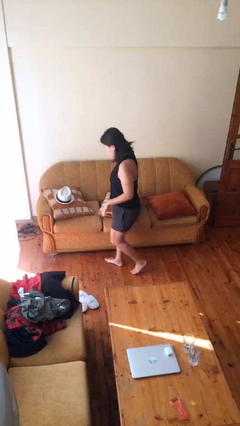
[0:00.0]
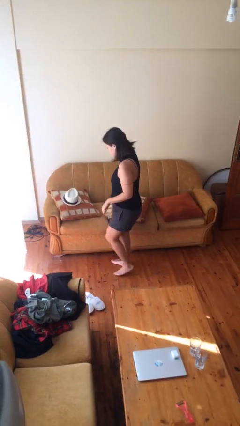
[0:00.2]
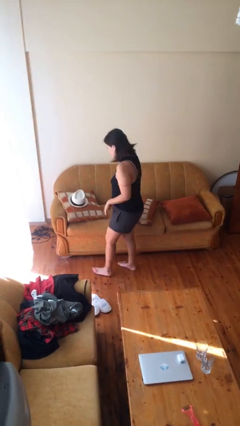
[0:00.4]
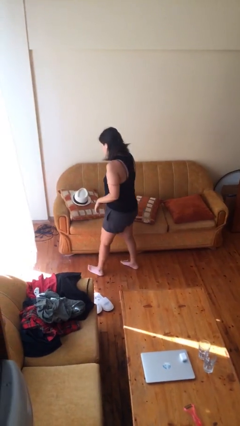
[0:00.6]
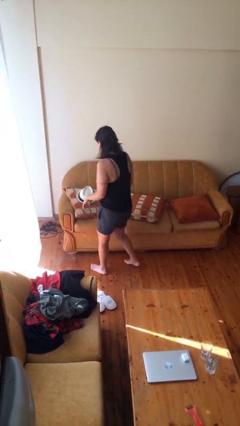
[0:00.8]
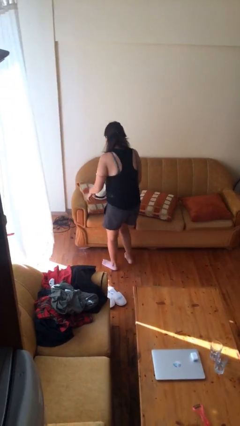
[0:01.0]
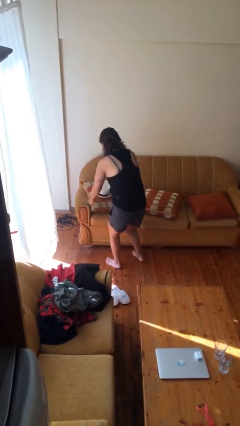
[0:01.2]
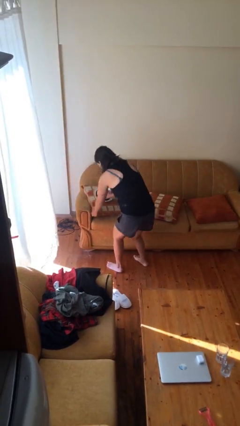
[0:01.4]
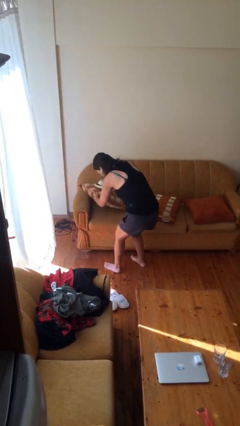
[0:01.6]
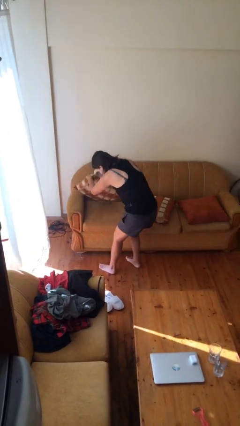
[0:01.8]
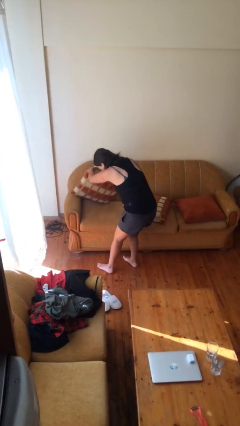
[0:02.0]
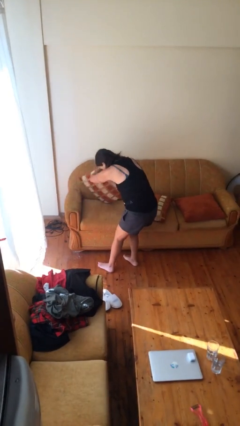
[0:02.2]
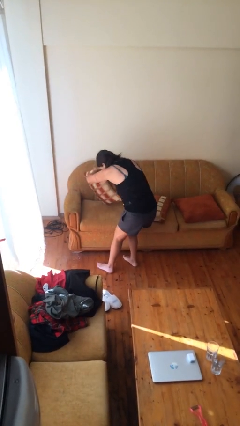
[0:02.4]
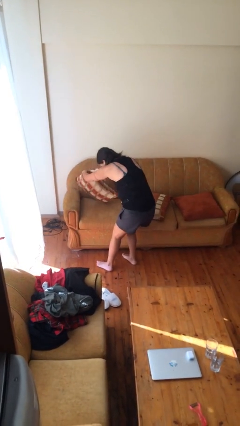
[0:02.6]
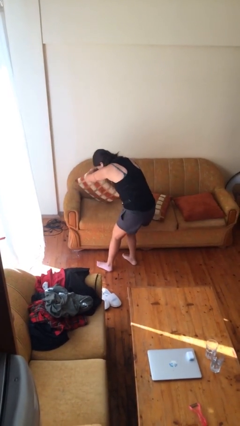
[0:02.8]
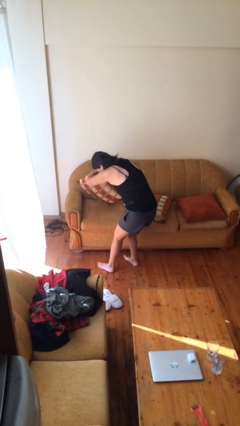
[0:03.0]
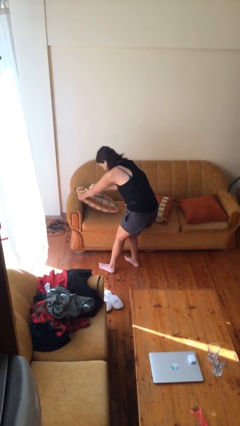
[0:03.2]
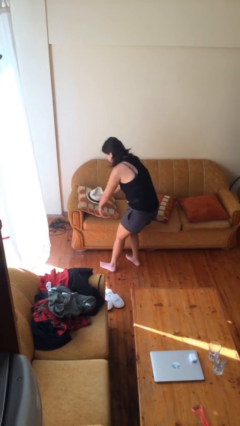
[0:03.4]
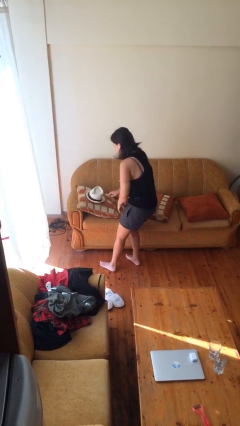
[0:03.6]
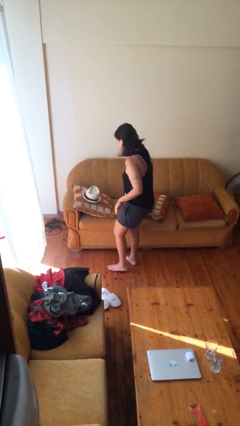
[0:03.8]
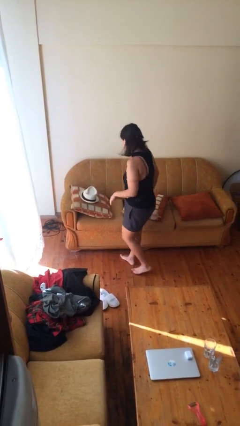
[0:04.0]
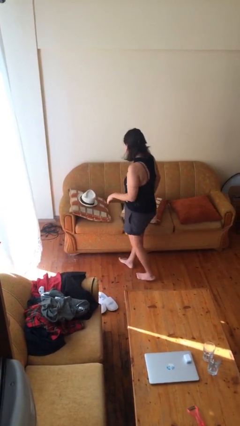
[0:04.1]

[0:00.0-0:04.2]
person searches in couch

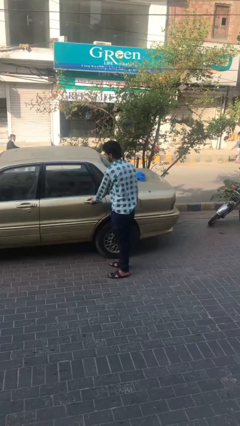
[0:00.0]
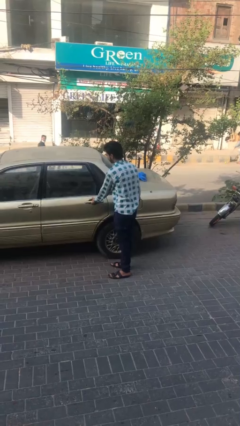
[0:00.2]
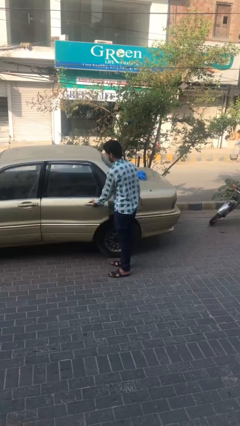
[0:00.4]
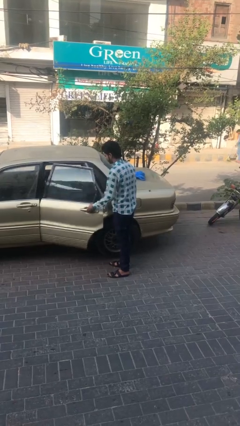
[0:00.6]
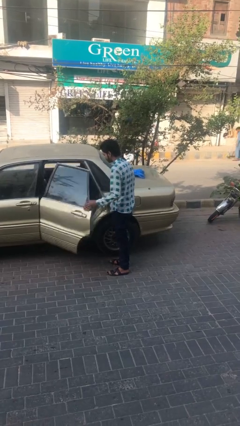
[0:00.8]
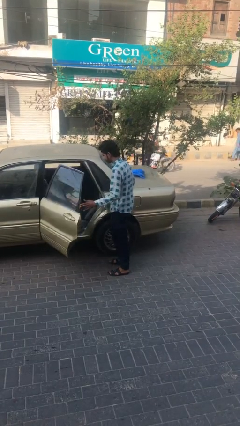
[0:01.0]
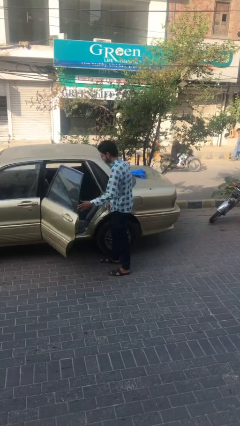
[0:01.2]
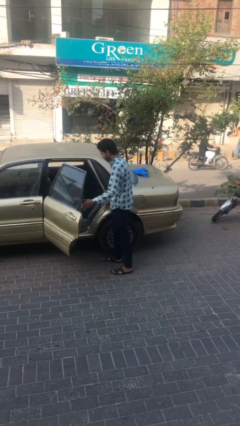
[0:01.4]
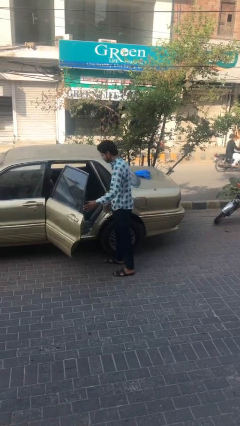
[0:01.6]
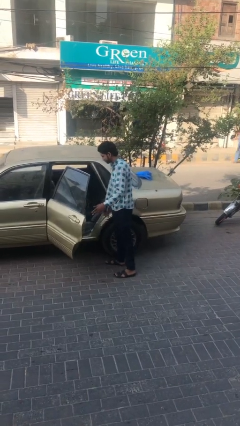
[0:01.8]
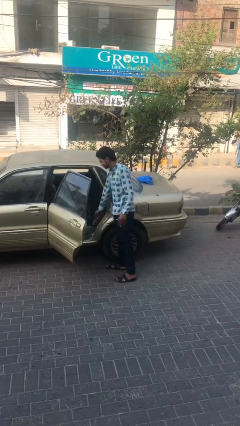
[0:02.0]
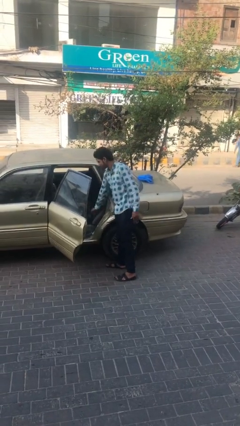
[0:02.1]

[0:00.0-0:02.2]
person opens car door

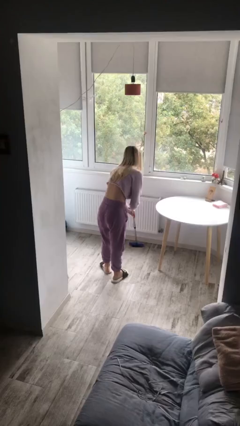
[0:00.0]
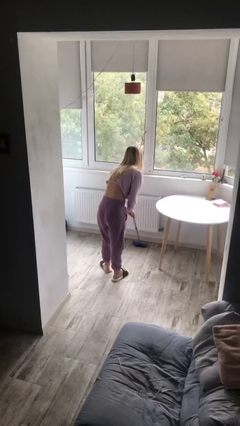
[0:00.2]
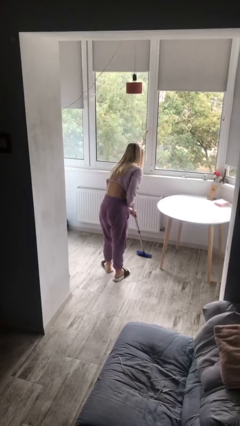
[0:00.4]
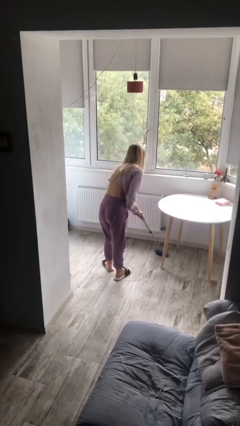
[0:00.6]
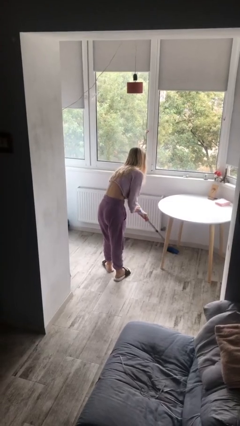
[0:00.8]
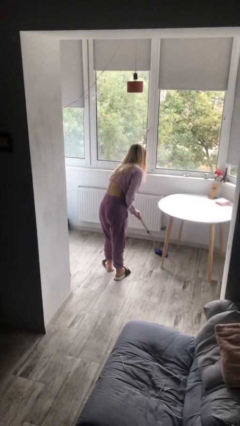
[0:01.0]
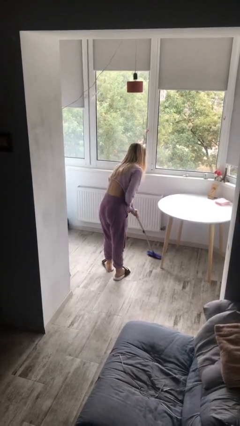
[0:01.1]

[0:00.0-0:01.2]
person mops

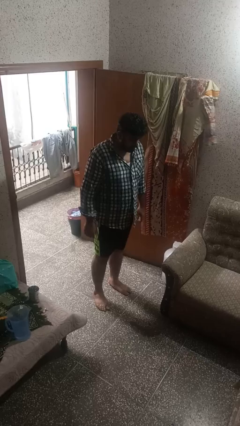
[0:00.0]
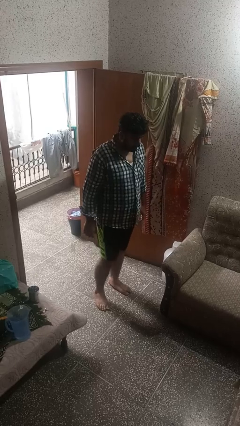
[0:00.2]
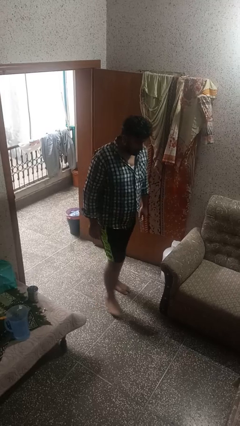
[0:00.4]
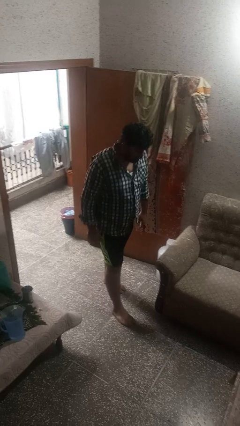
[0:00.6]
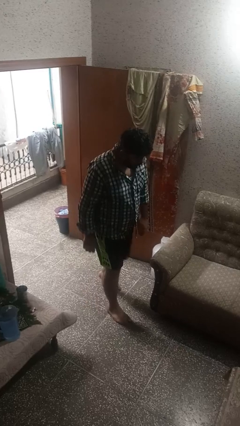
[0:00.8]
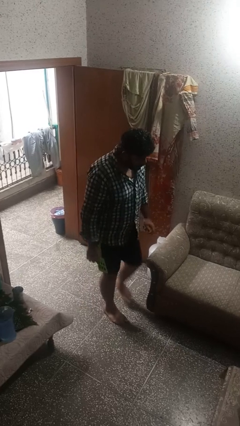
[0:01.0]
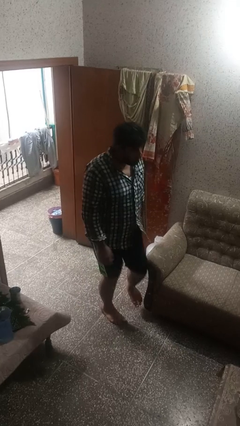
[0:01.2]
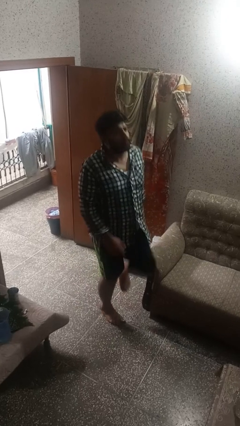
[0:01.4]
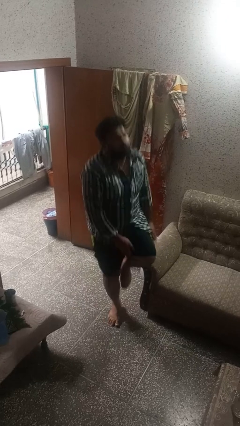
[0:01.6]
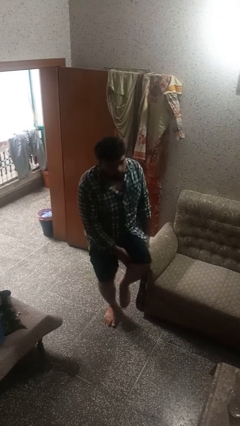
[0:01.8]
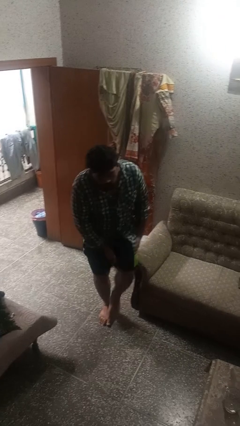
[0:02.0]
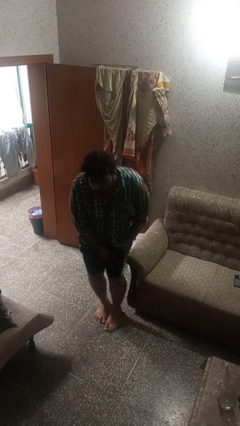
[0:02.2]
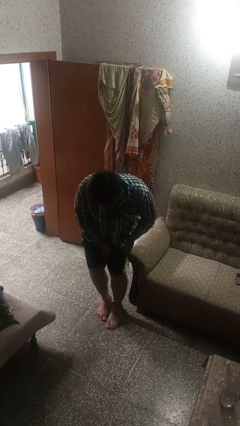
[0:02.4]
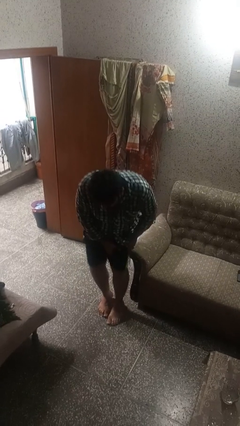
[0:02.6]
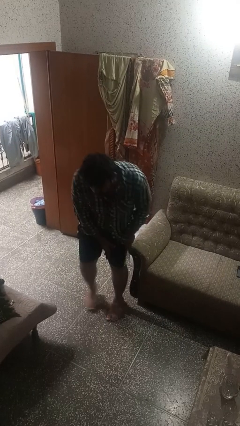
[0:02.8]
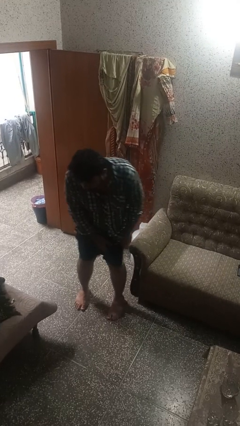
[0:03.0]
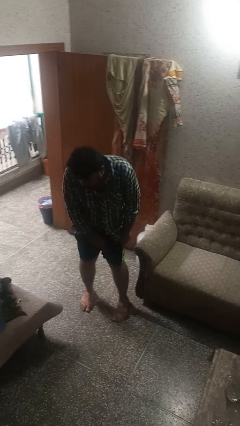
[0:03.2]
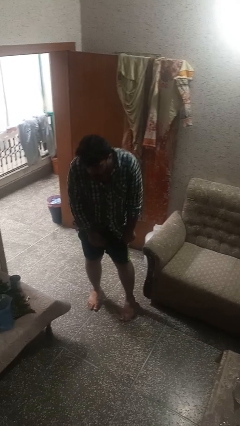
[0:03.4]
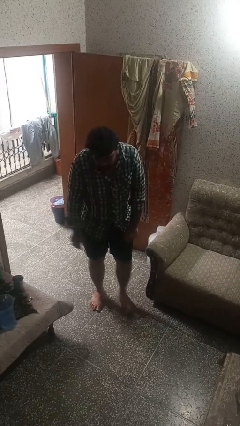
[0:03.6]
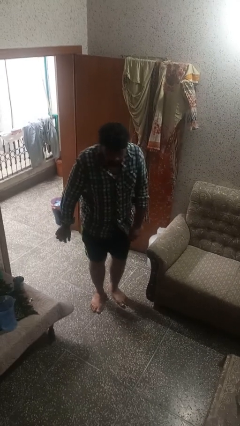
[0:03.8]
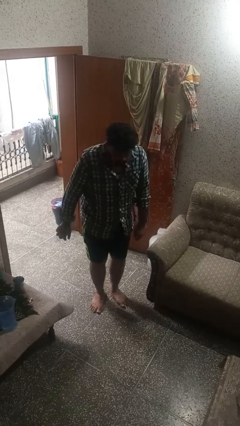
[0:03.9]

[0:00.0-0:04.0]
person stubs toe

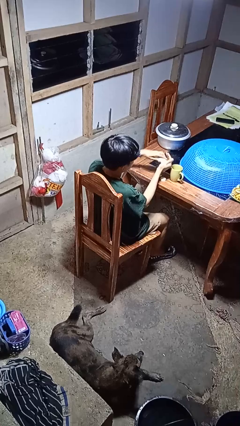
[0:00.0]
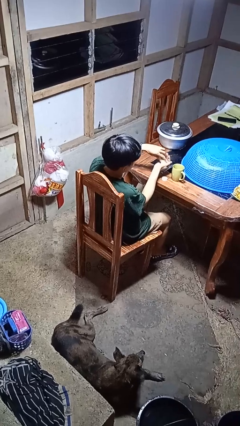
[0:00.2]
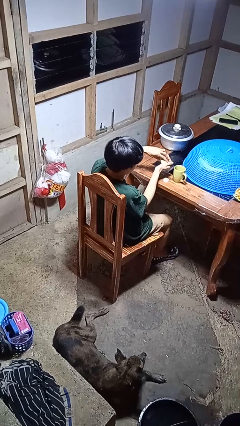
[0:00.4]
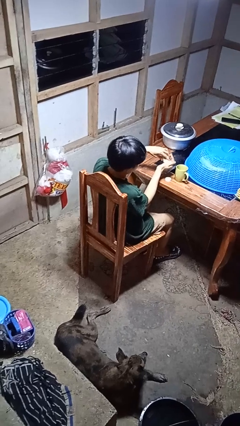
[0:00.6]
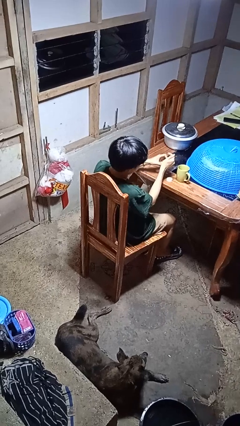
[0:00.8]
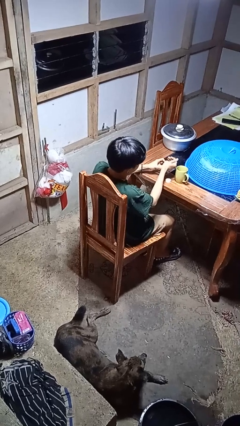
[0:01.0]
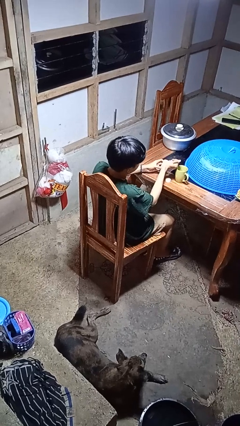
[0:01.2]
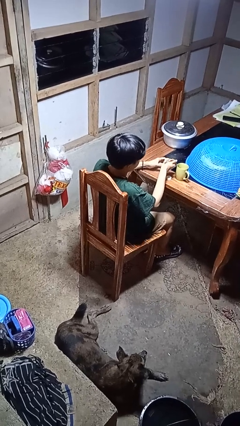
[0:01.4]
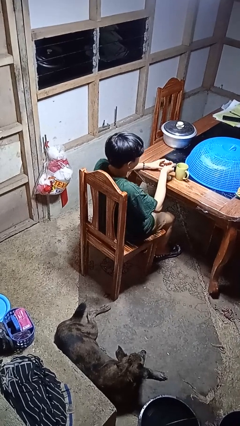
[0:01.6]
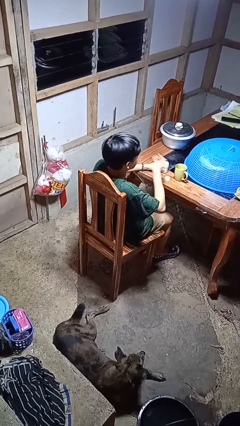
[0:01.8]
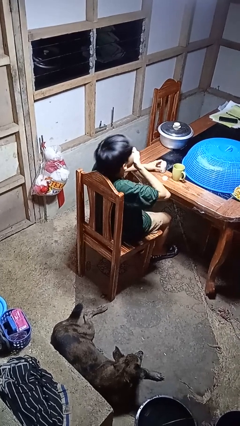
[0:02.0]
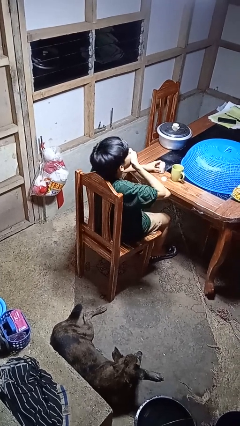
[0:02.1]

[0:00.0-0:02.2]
person takes medicine pills

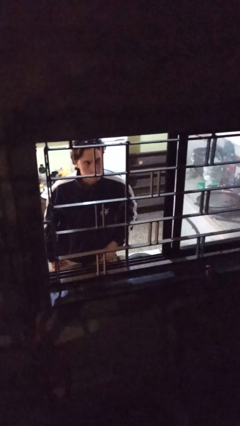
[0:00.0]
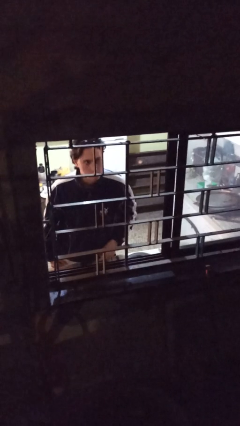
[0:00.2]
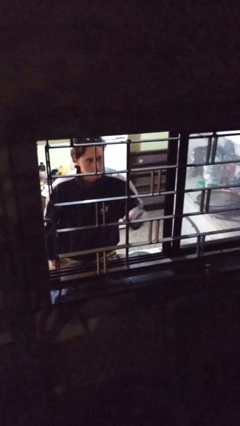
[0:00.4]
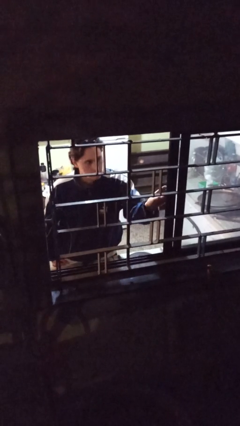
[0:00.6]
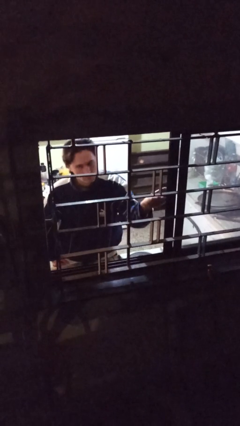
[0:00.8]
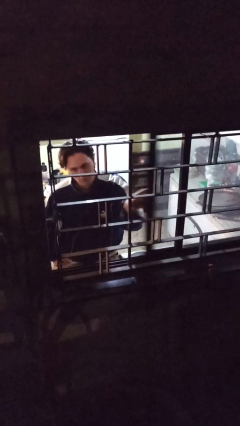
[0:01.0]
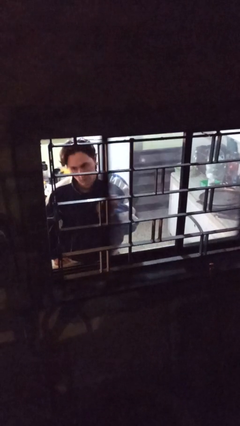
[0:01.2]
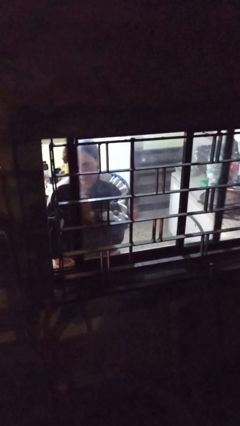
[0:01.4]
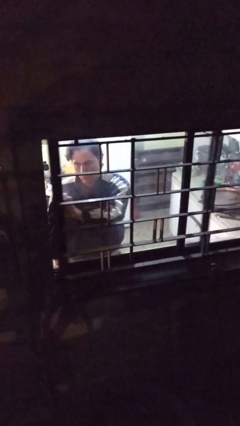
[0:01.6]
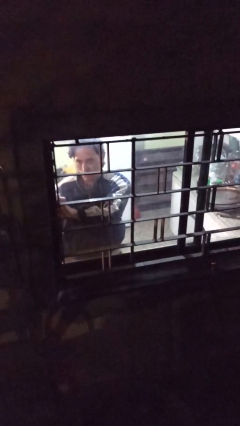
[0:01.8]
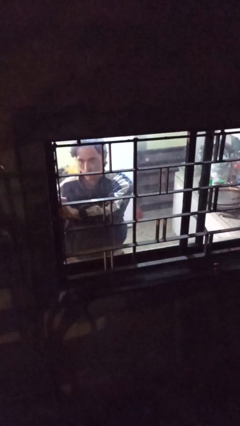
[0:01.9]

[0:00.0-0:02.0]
person closes home window

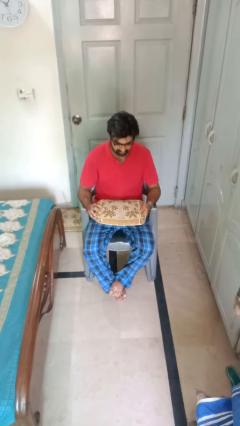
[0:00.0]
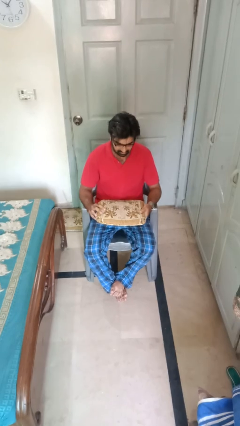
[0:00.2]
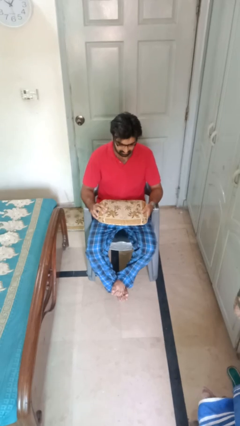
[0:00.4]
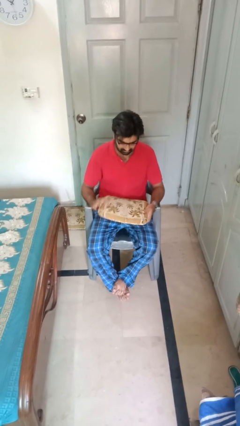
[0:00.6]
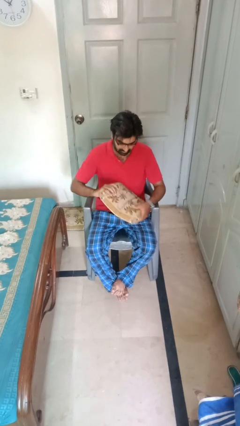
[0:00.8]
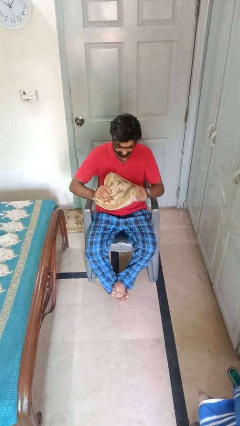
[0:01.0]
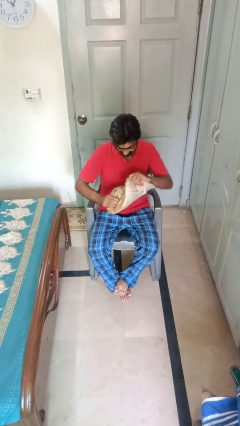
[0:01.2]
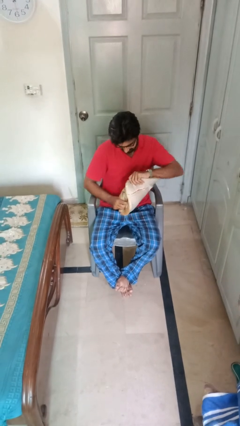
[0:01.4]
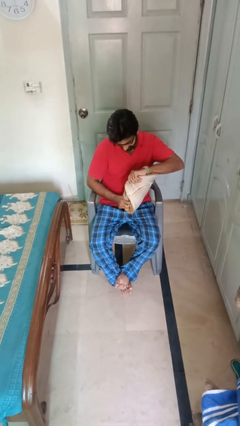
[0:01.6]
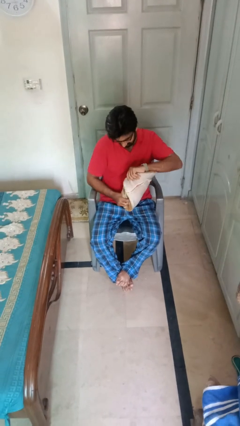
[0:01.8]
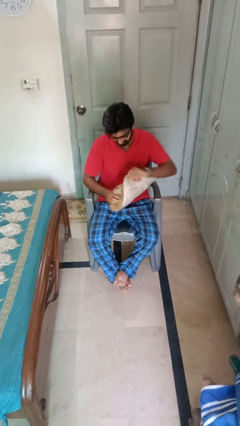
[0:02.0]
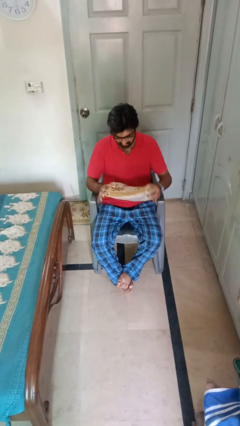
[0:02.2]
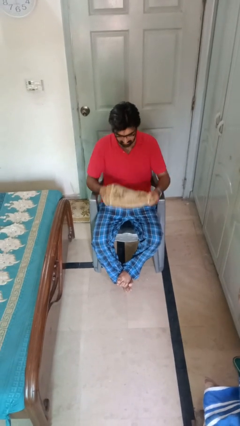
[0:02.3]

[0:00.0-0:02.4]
person squeezes object
